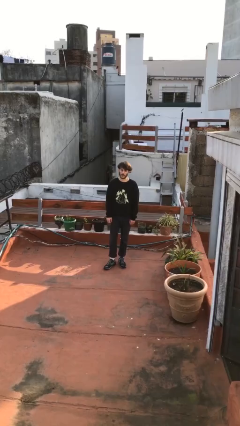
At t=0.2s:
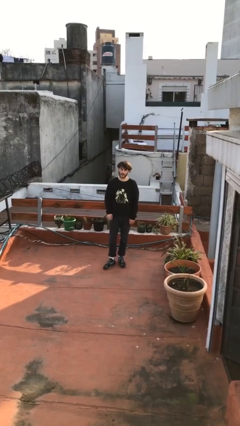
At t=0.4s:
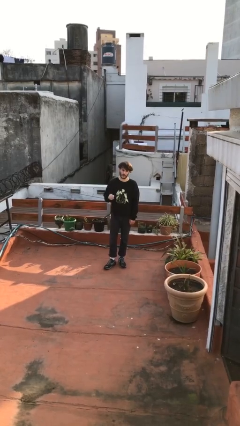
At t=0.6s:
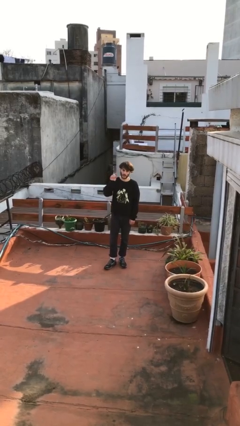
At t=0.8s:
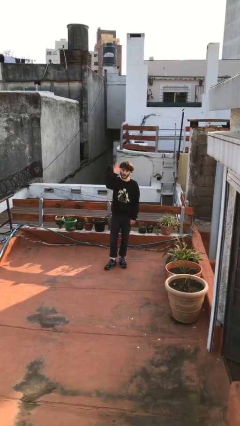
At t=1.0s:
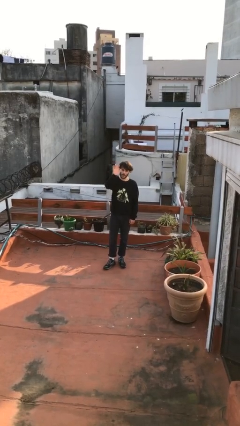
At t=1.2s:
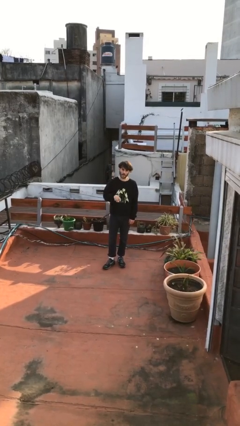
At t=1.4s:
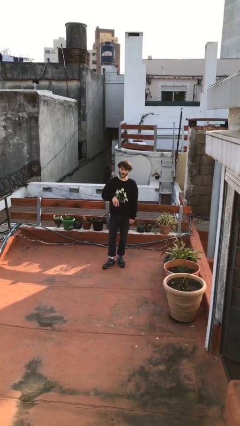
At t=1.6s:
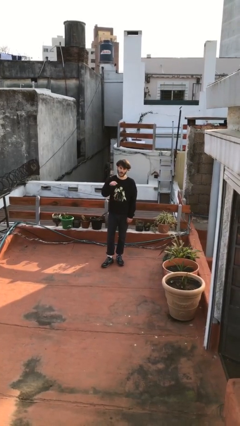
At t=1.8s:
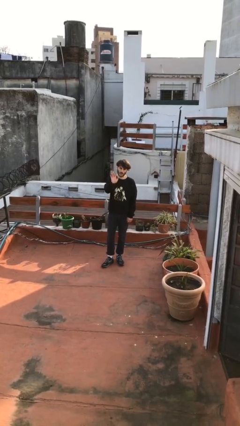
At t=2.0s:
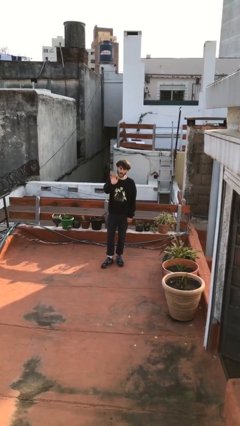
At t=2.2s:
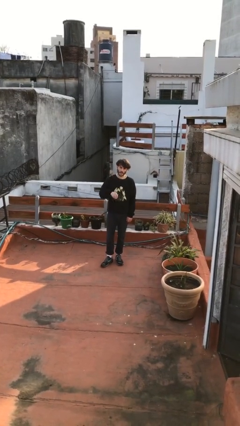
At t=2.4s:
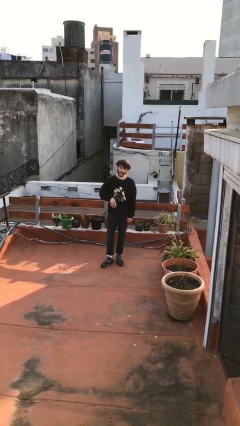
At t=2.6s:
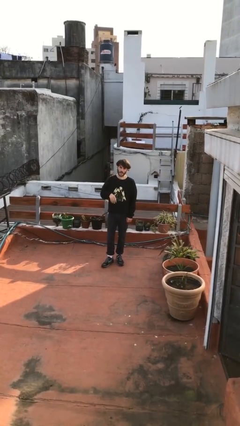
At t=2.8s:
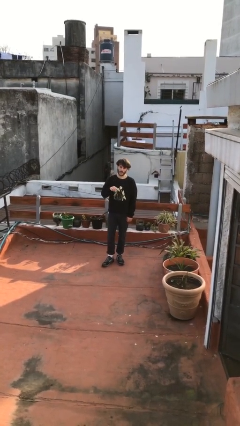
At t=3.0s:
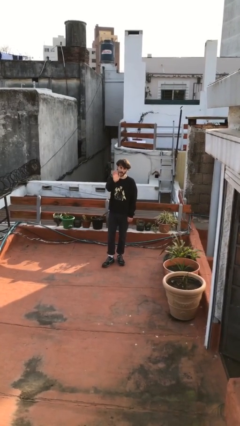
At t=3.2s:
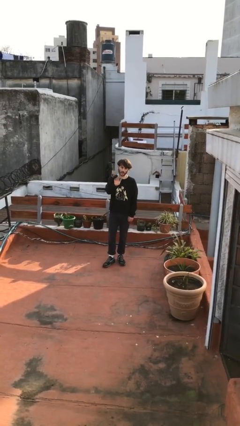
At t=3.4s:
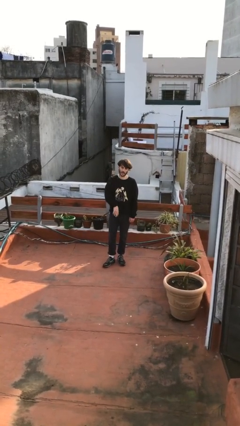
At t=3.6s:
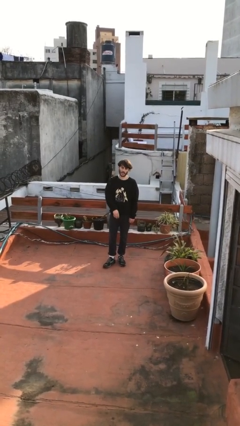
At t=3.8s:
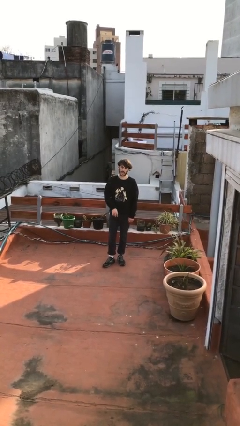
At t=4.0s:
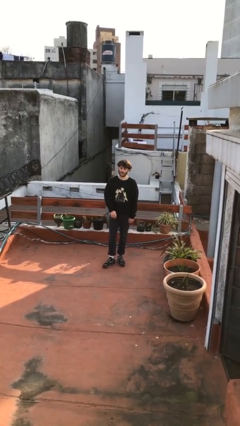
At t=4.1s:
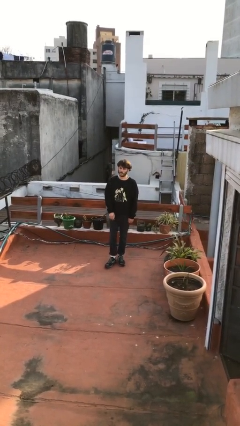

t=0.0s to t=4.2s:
person gestures swipe down

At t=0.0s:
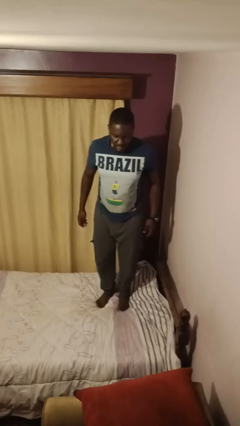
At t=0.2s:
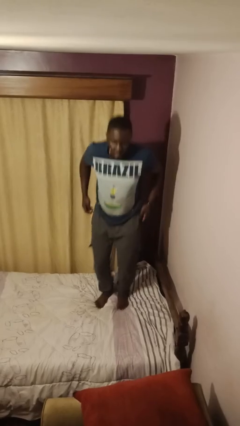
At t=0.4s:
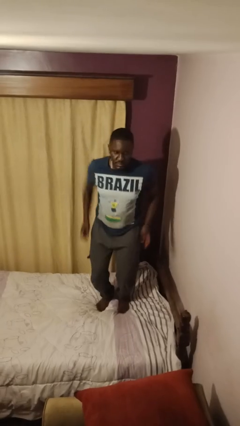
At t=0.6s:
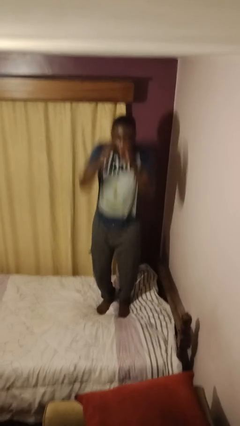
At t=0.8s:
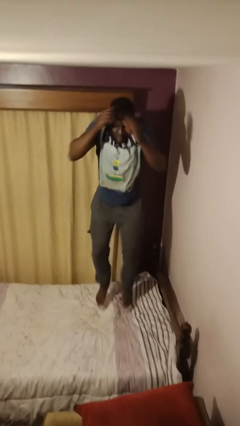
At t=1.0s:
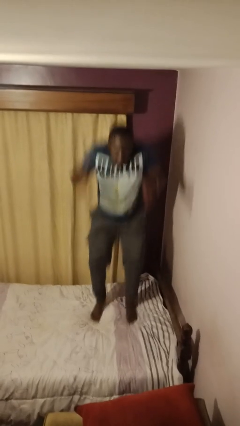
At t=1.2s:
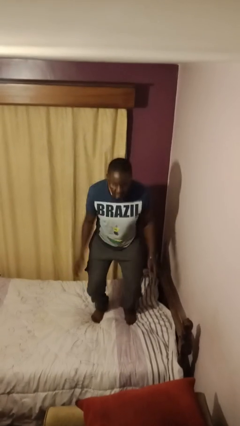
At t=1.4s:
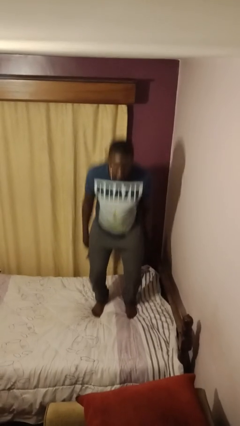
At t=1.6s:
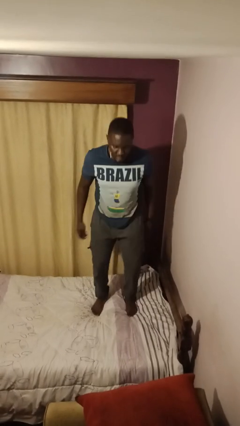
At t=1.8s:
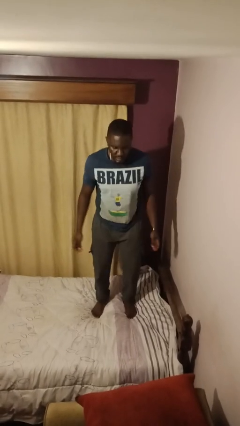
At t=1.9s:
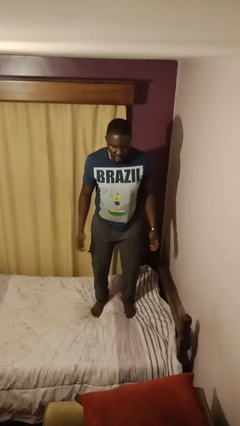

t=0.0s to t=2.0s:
person jumps on bed

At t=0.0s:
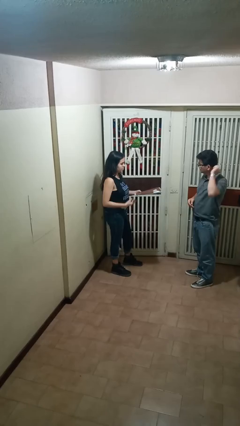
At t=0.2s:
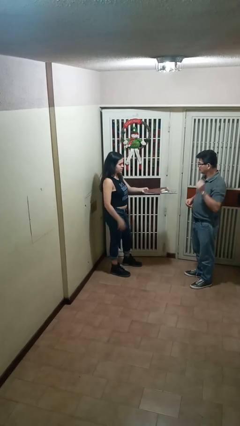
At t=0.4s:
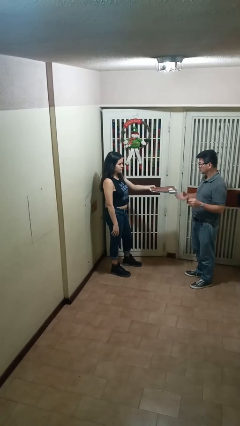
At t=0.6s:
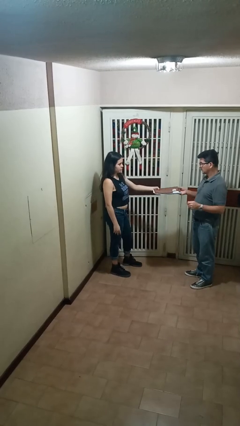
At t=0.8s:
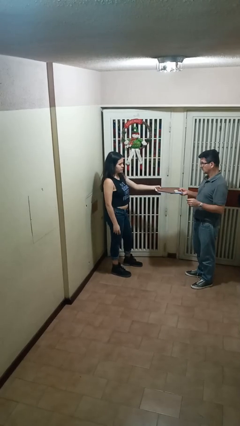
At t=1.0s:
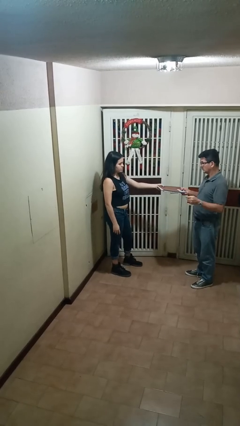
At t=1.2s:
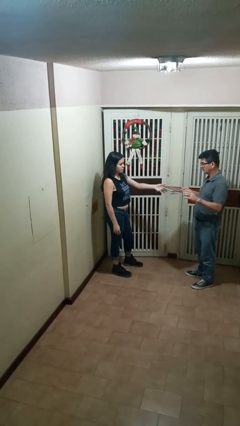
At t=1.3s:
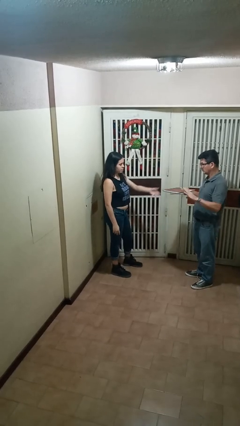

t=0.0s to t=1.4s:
person transfers object to person

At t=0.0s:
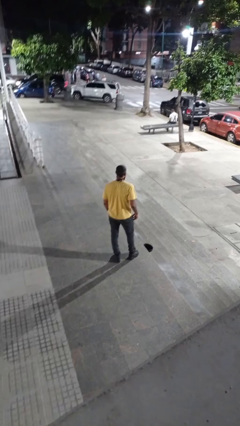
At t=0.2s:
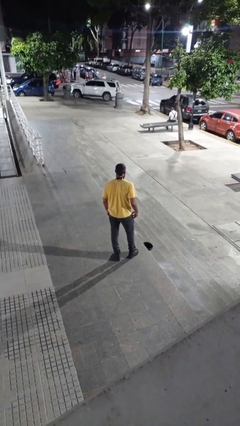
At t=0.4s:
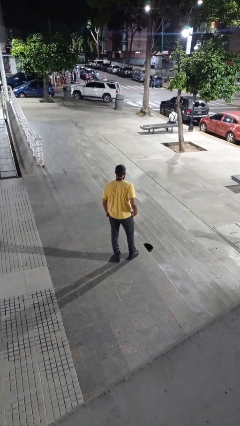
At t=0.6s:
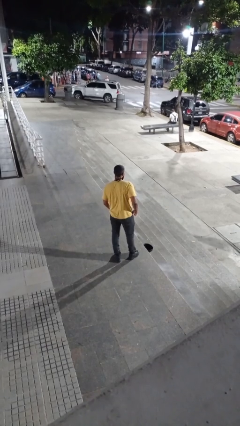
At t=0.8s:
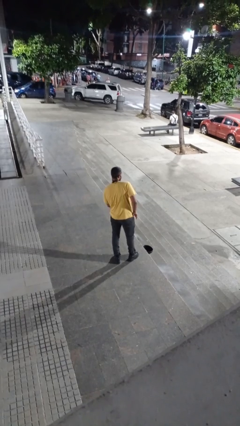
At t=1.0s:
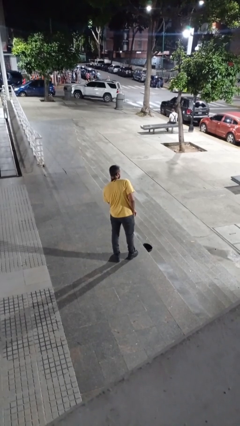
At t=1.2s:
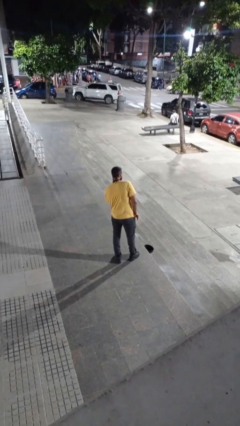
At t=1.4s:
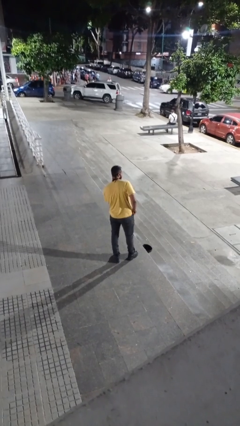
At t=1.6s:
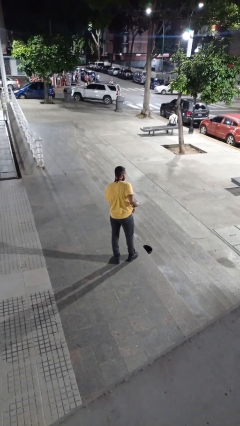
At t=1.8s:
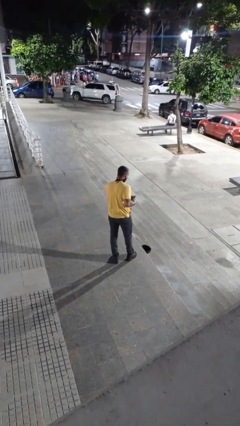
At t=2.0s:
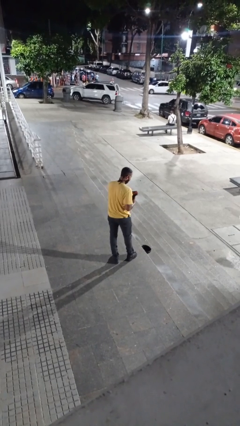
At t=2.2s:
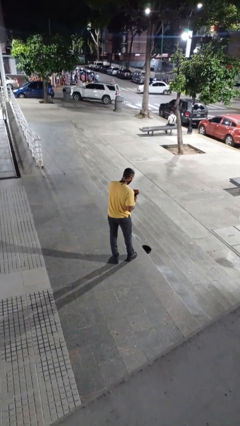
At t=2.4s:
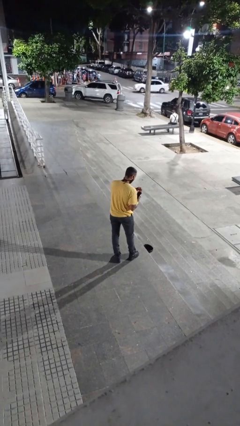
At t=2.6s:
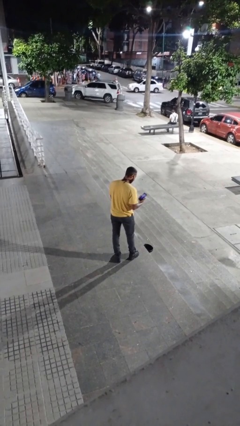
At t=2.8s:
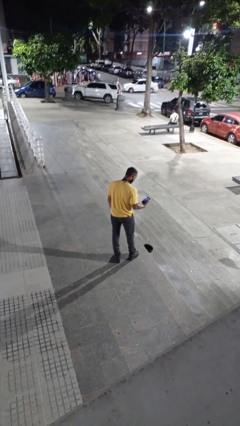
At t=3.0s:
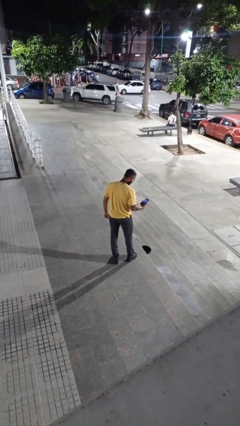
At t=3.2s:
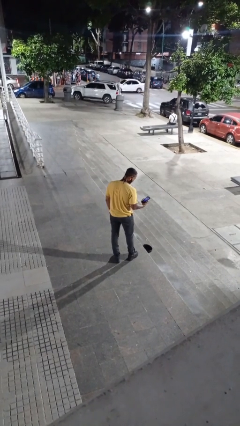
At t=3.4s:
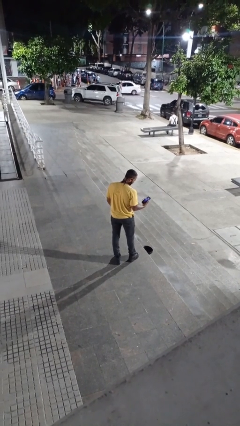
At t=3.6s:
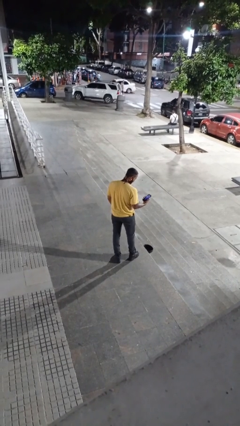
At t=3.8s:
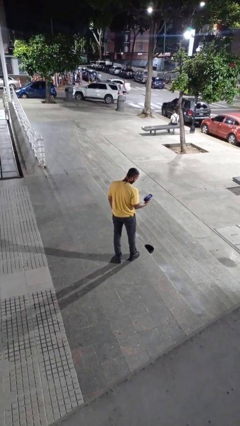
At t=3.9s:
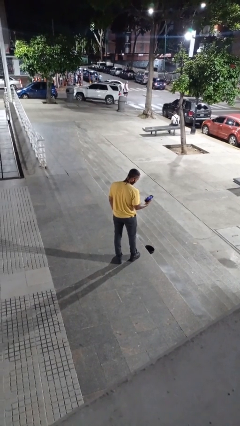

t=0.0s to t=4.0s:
person takes phone from pocket

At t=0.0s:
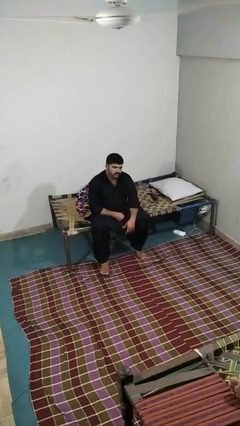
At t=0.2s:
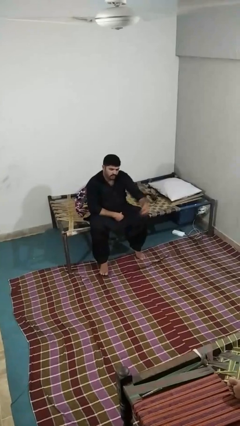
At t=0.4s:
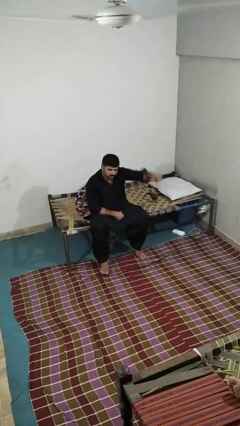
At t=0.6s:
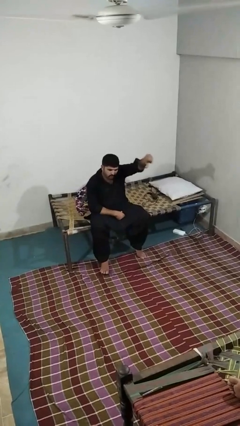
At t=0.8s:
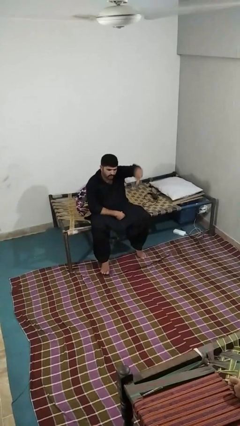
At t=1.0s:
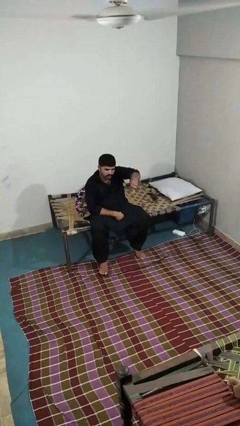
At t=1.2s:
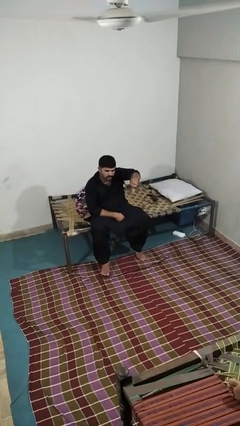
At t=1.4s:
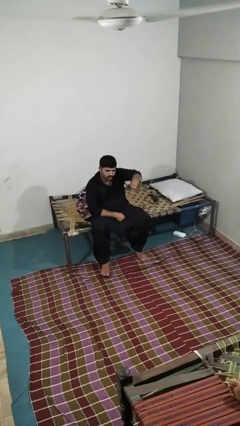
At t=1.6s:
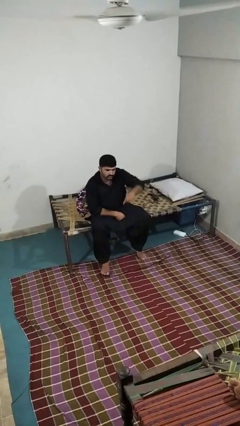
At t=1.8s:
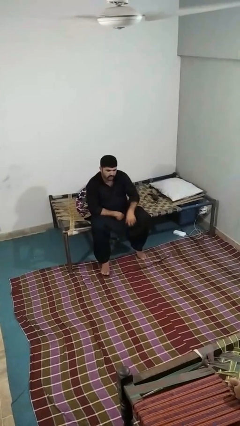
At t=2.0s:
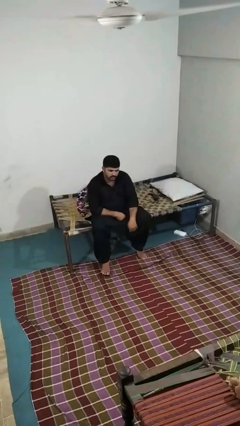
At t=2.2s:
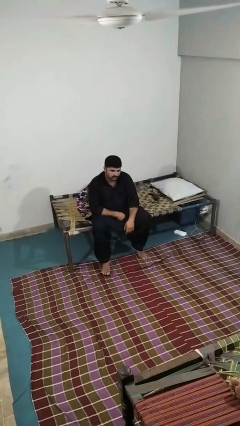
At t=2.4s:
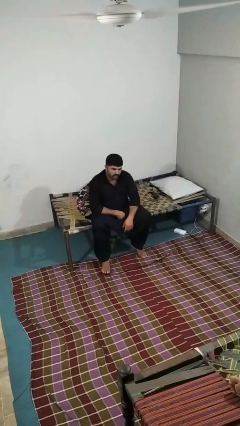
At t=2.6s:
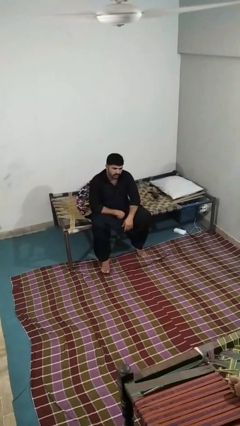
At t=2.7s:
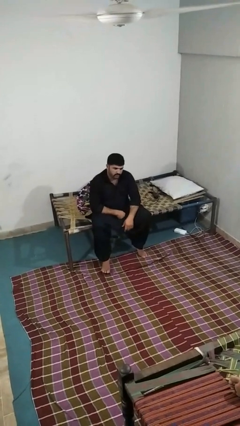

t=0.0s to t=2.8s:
person gestures thumbs down

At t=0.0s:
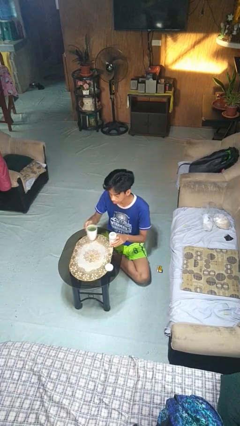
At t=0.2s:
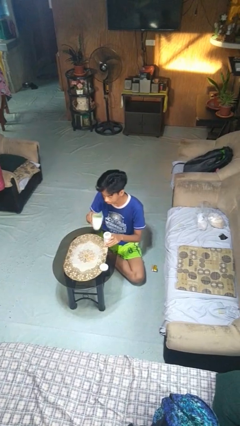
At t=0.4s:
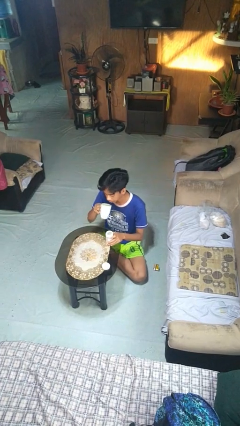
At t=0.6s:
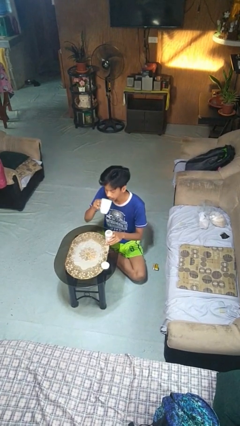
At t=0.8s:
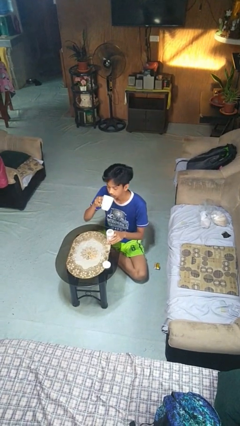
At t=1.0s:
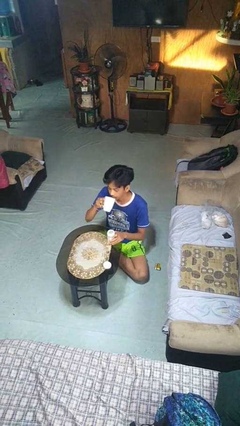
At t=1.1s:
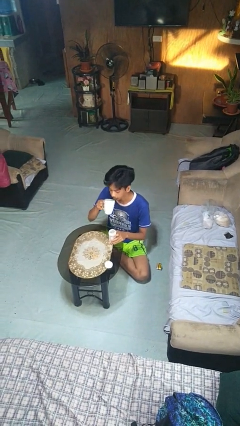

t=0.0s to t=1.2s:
person drinks from cup

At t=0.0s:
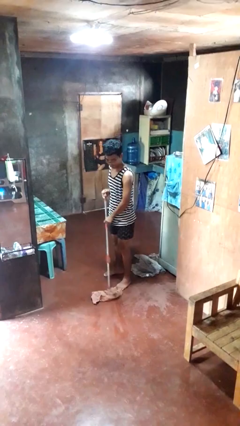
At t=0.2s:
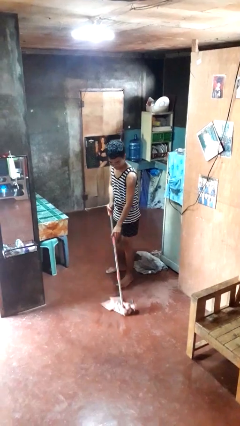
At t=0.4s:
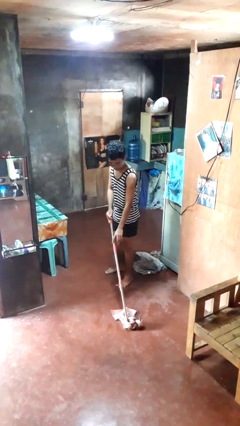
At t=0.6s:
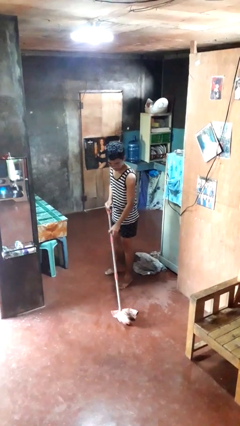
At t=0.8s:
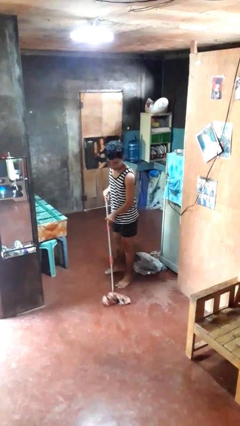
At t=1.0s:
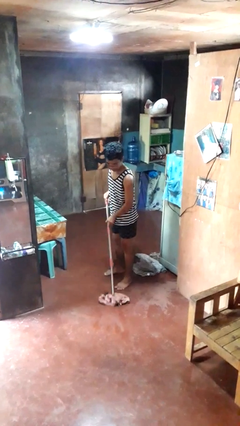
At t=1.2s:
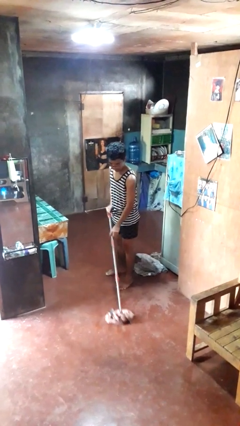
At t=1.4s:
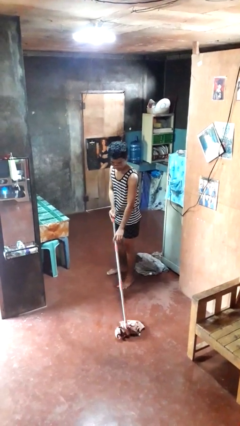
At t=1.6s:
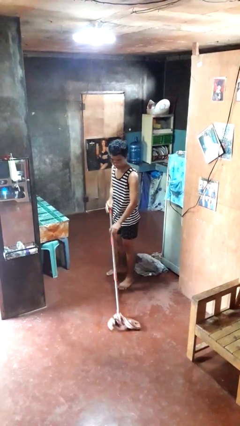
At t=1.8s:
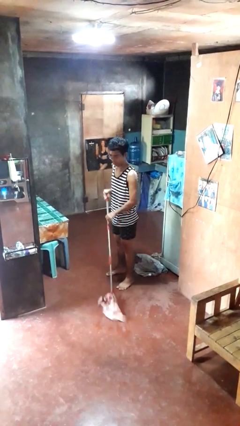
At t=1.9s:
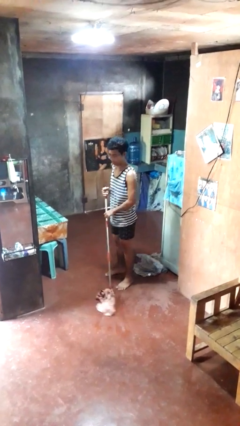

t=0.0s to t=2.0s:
person mops
